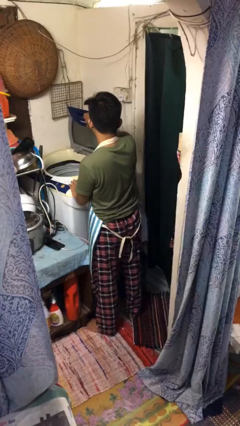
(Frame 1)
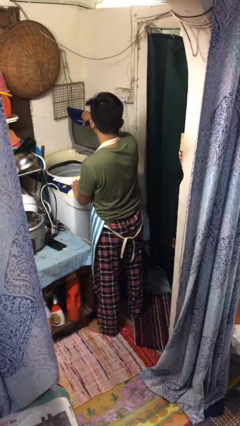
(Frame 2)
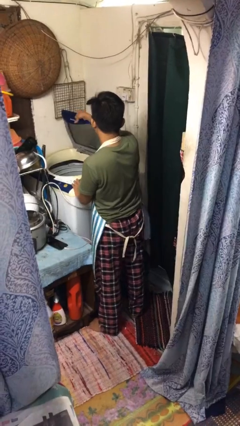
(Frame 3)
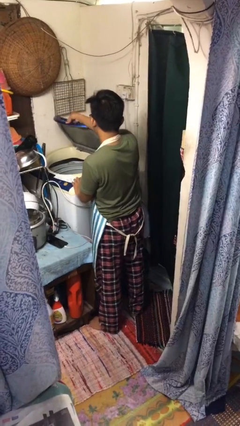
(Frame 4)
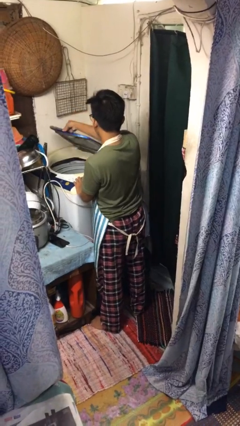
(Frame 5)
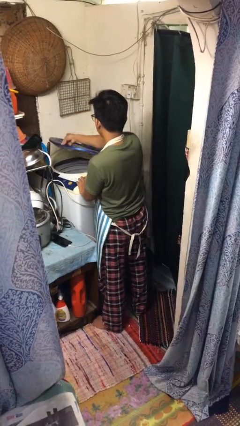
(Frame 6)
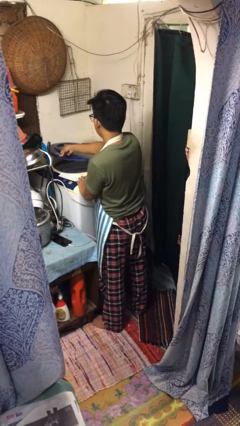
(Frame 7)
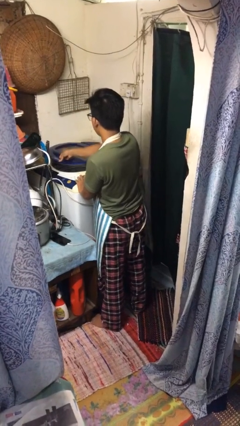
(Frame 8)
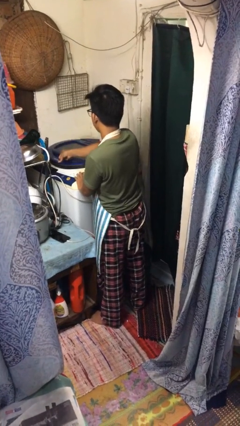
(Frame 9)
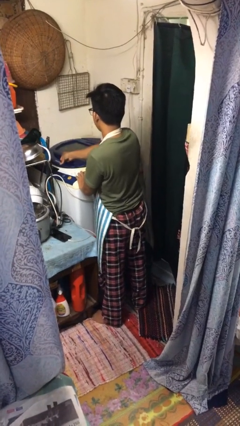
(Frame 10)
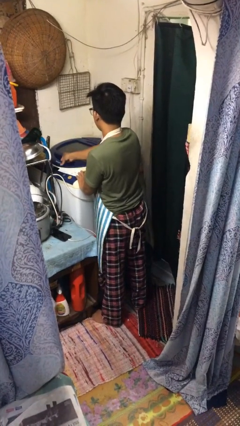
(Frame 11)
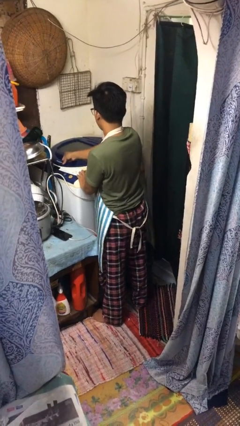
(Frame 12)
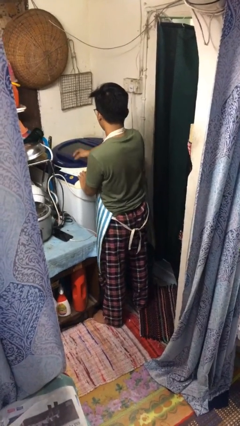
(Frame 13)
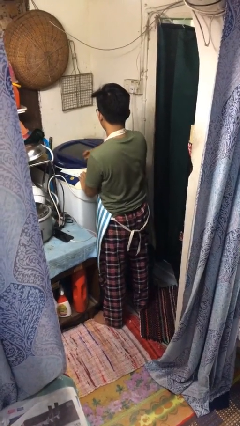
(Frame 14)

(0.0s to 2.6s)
person closes clothes washer

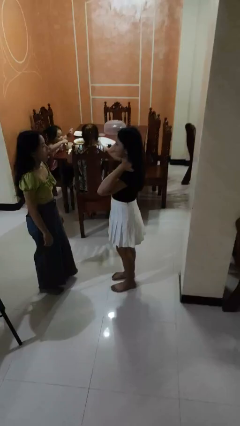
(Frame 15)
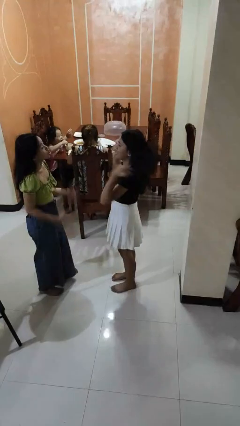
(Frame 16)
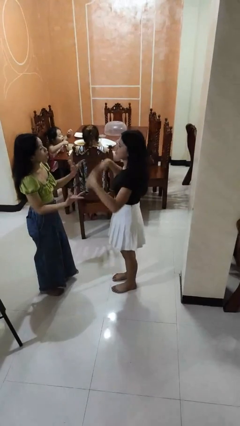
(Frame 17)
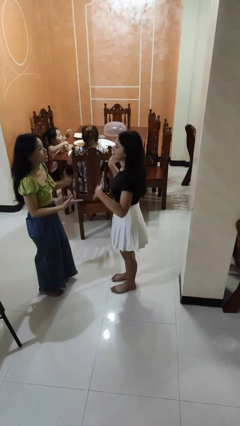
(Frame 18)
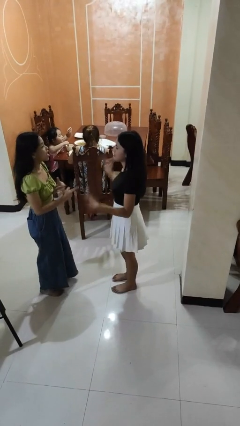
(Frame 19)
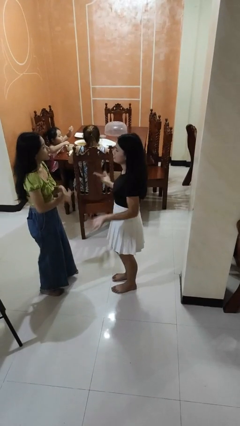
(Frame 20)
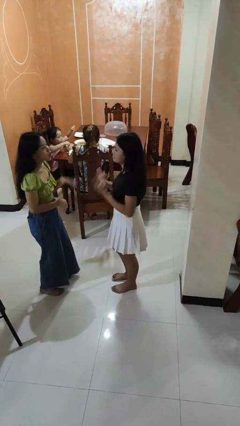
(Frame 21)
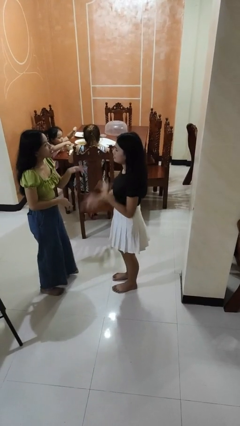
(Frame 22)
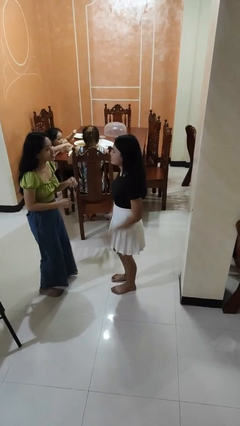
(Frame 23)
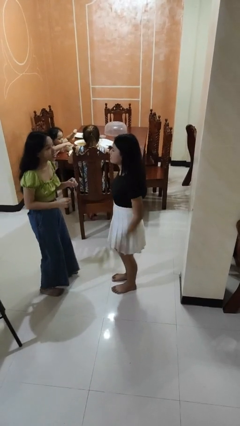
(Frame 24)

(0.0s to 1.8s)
person talks to person

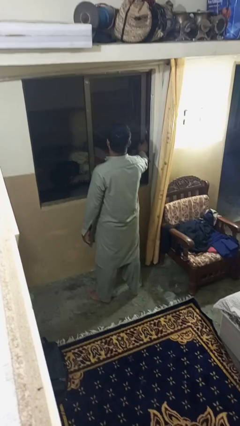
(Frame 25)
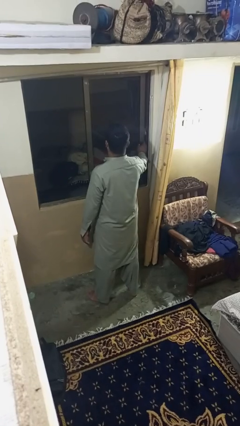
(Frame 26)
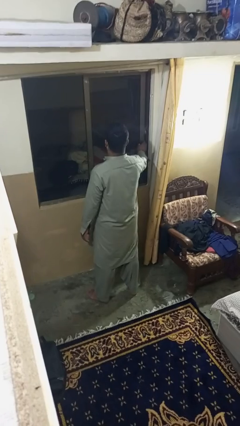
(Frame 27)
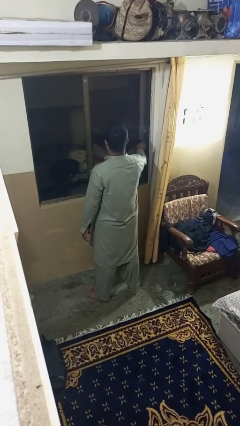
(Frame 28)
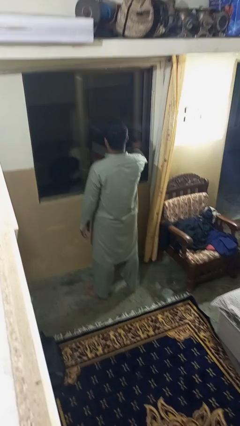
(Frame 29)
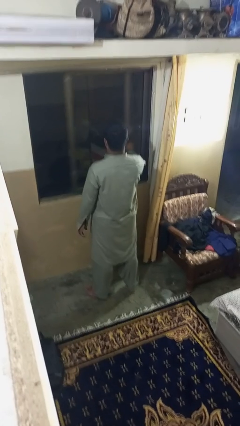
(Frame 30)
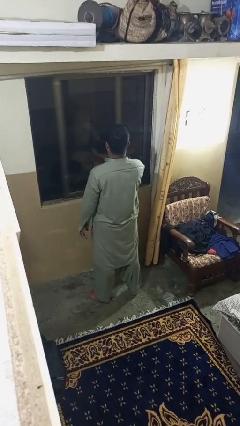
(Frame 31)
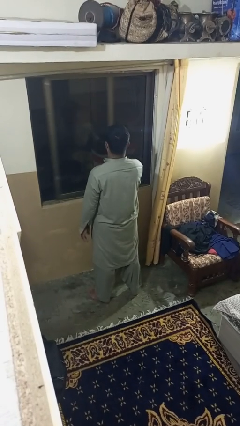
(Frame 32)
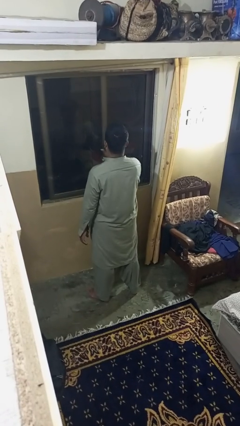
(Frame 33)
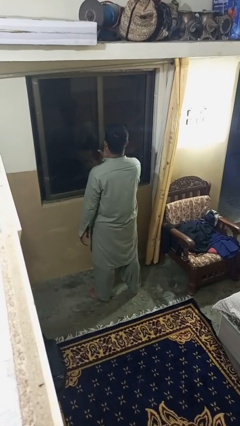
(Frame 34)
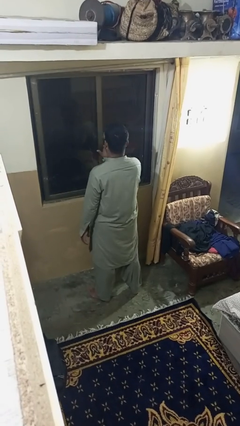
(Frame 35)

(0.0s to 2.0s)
person closes home window

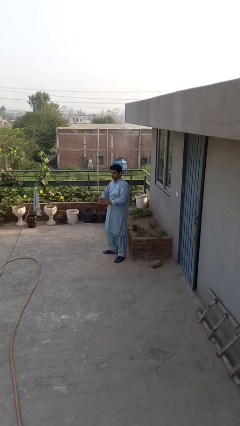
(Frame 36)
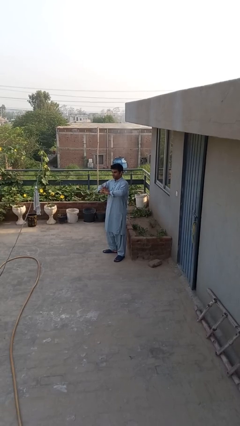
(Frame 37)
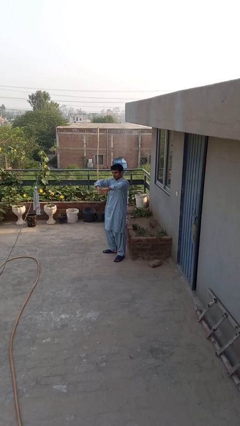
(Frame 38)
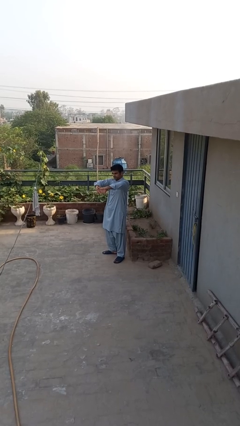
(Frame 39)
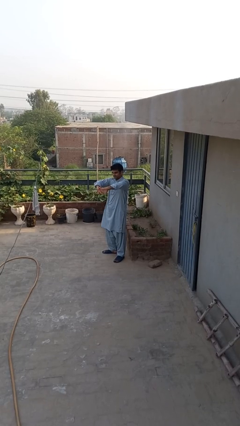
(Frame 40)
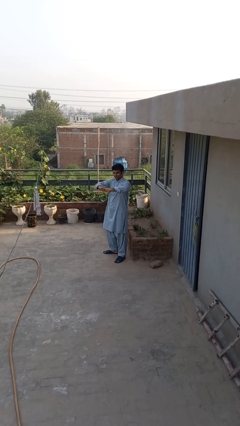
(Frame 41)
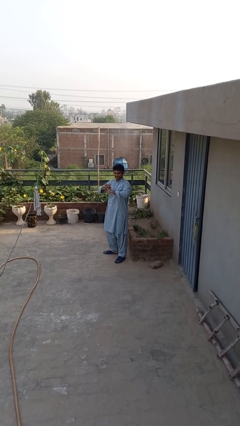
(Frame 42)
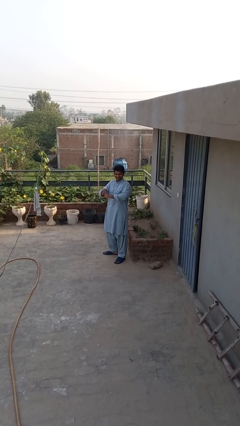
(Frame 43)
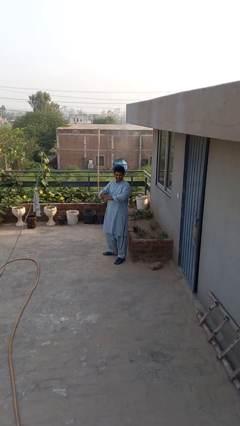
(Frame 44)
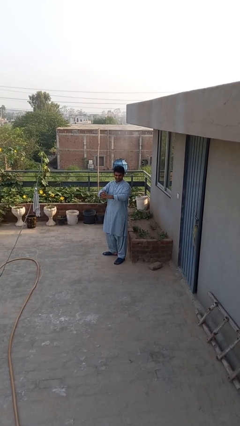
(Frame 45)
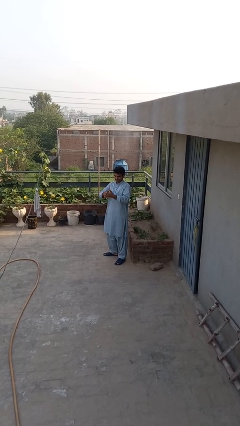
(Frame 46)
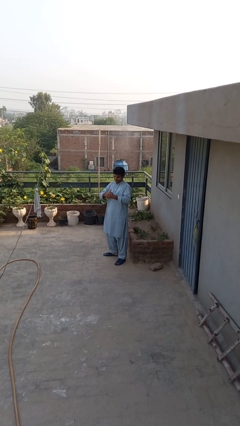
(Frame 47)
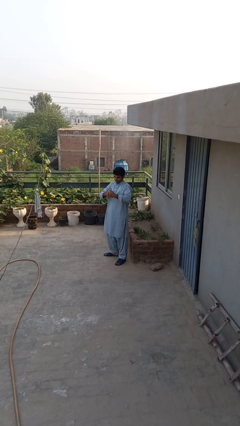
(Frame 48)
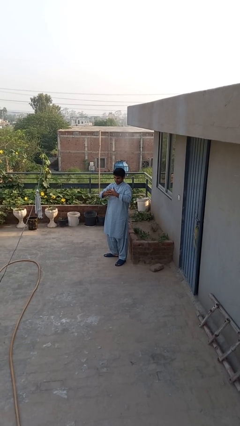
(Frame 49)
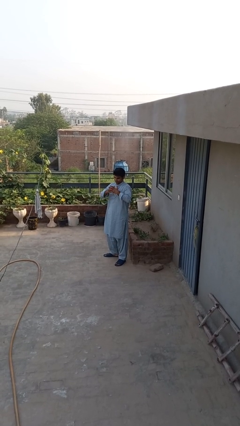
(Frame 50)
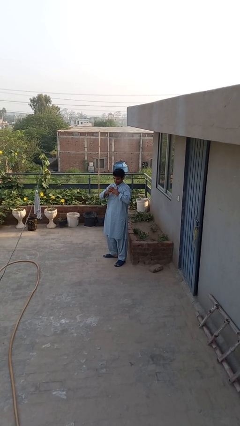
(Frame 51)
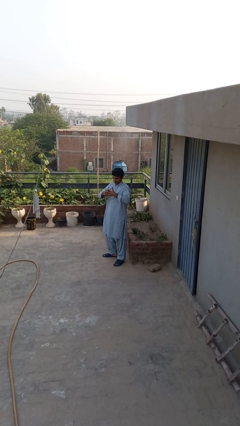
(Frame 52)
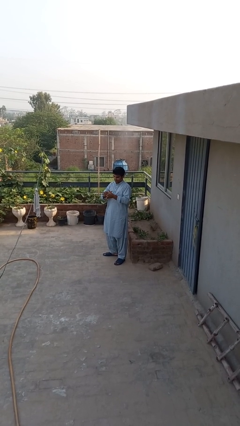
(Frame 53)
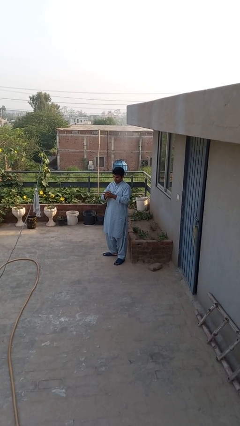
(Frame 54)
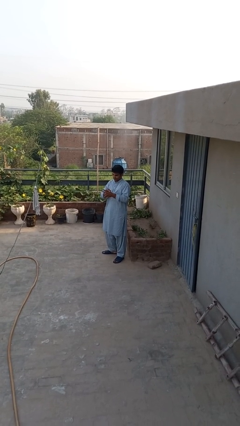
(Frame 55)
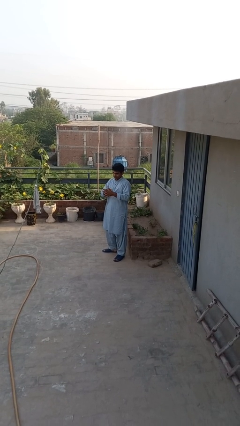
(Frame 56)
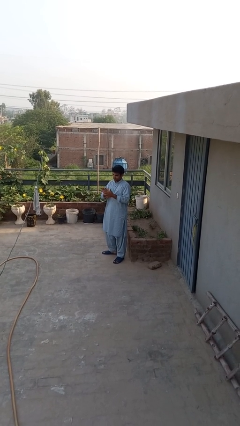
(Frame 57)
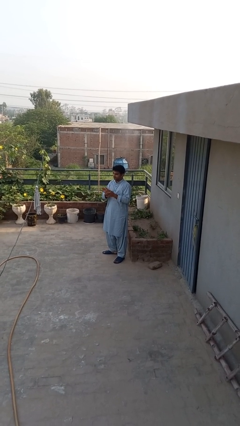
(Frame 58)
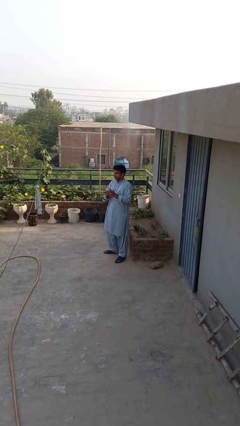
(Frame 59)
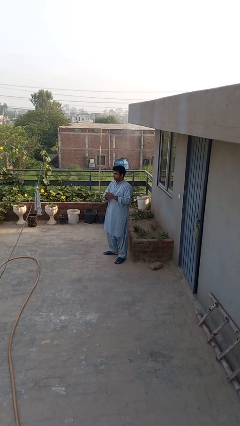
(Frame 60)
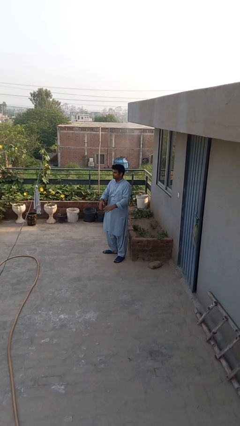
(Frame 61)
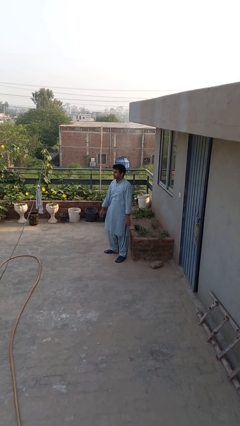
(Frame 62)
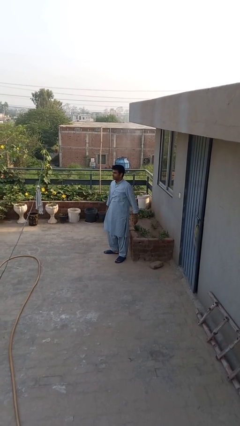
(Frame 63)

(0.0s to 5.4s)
person cracks knuckles

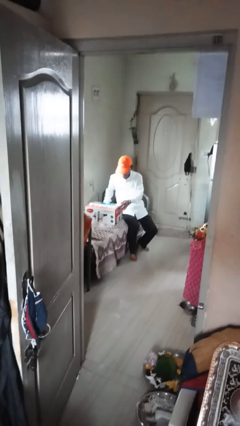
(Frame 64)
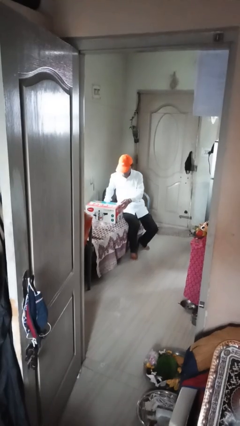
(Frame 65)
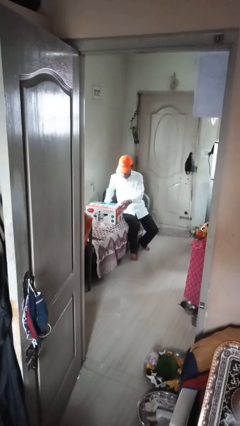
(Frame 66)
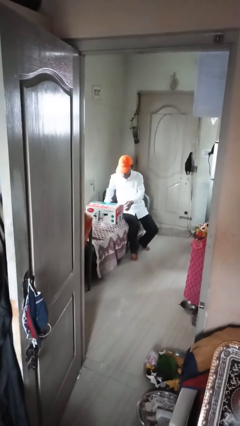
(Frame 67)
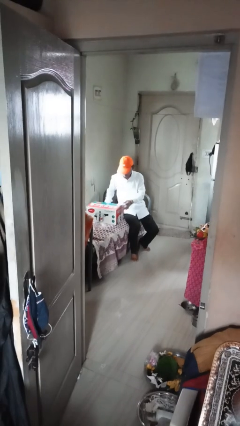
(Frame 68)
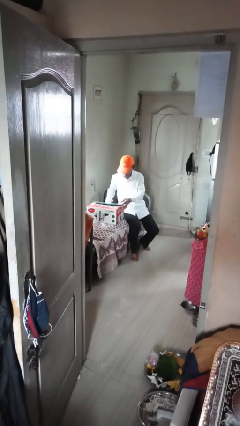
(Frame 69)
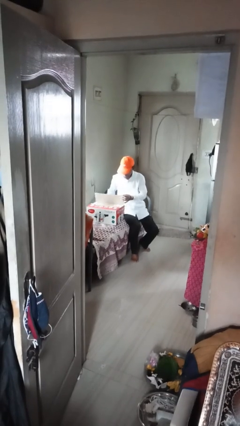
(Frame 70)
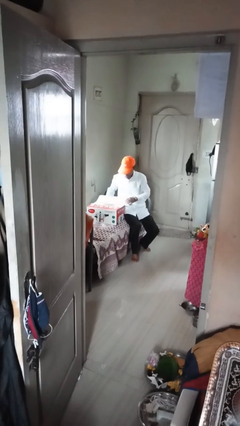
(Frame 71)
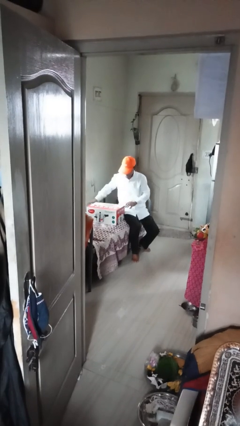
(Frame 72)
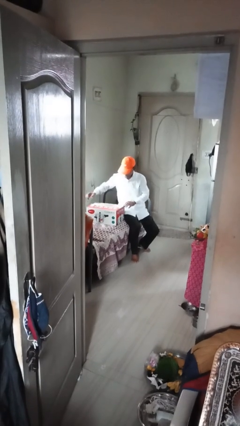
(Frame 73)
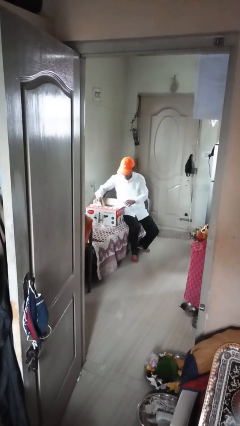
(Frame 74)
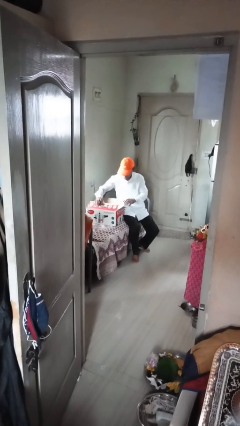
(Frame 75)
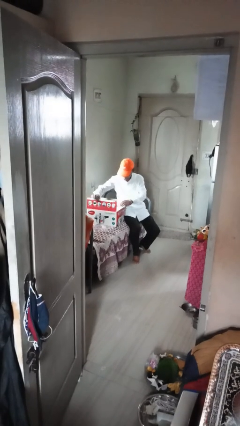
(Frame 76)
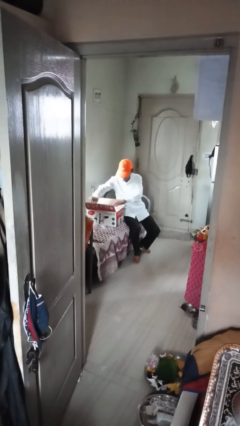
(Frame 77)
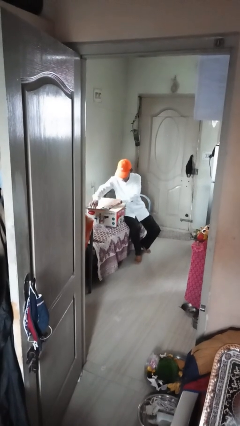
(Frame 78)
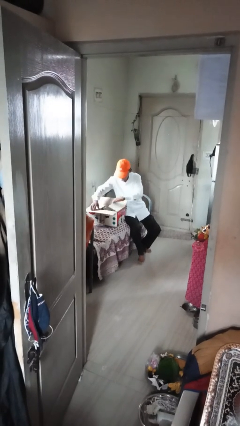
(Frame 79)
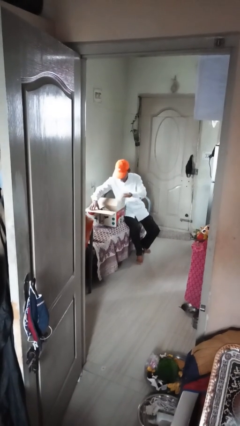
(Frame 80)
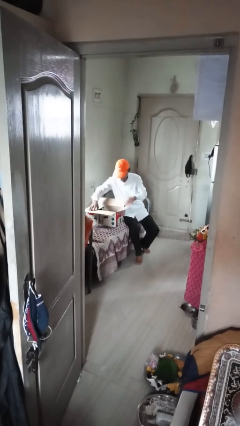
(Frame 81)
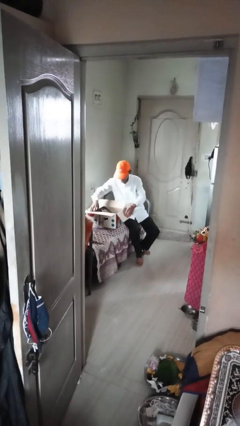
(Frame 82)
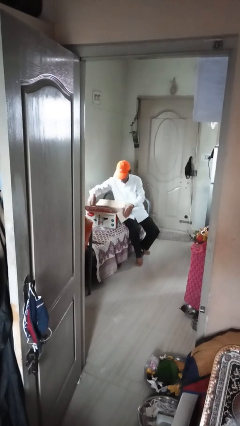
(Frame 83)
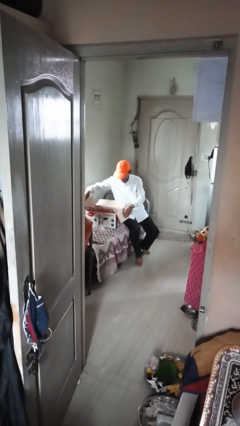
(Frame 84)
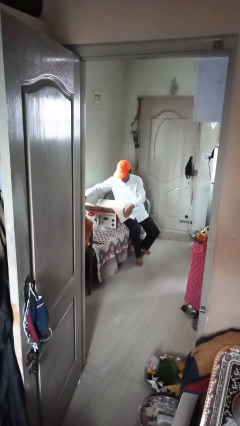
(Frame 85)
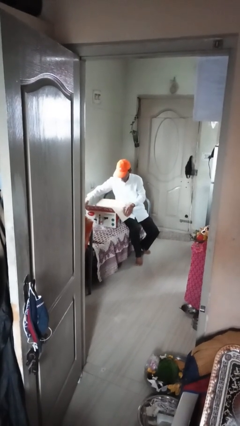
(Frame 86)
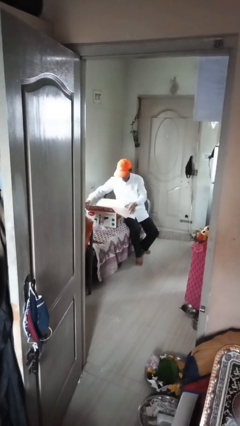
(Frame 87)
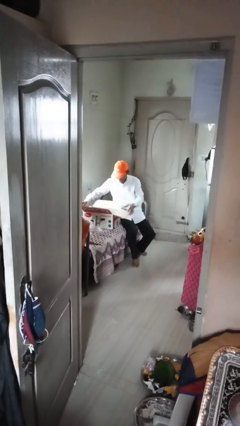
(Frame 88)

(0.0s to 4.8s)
person opens box

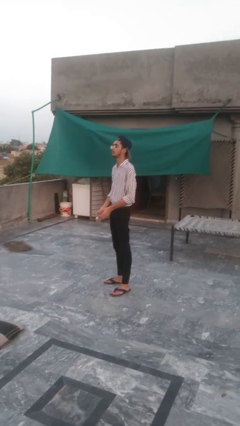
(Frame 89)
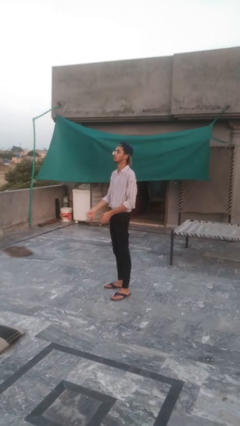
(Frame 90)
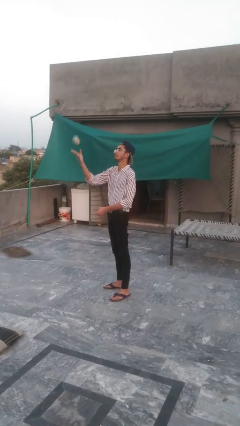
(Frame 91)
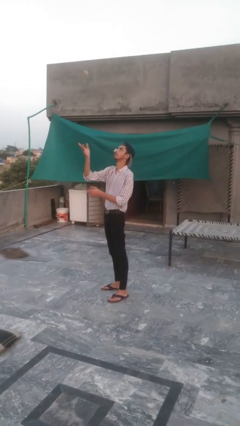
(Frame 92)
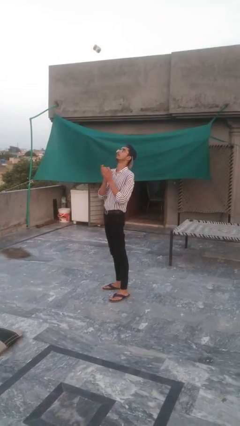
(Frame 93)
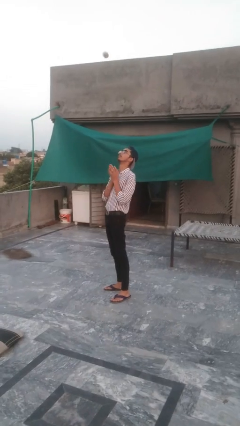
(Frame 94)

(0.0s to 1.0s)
person drops object
